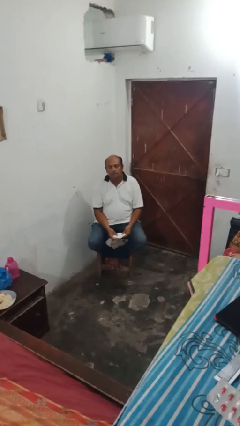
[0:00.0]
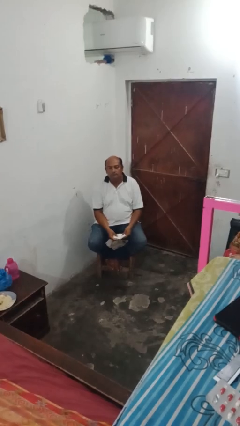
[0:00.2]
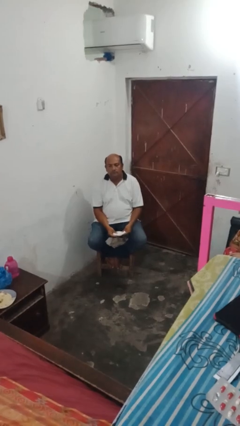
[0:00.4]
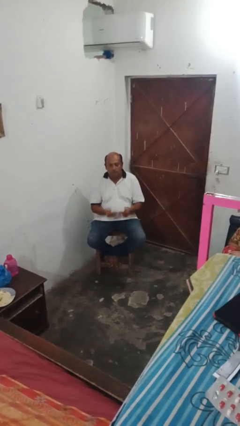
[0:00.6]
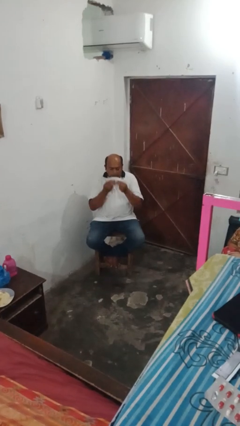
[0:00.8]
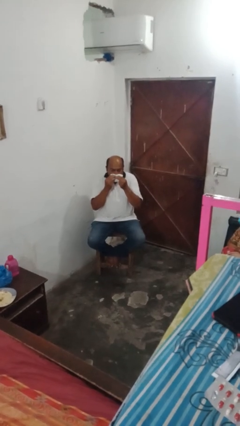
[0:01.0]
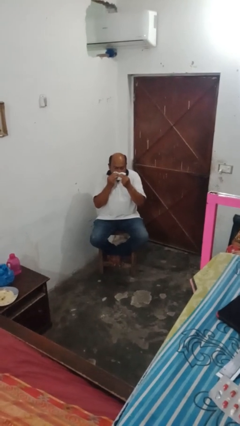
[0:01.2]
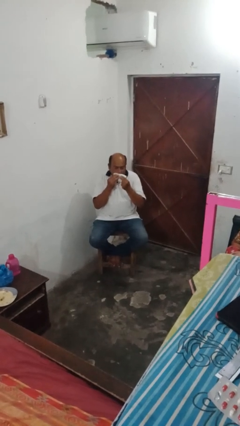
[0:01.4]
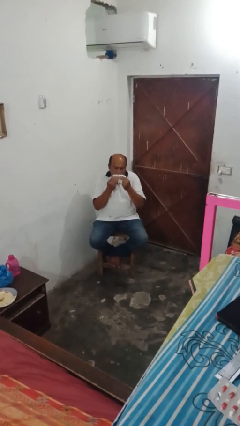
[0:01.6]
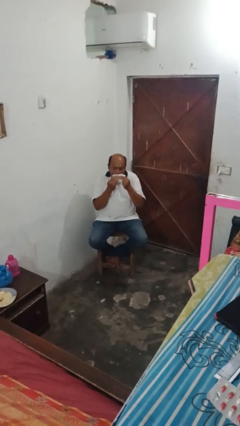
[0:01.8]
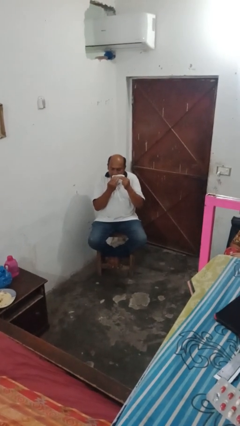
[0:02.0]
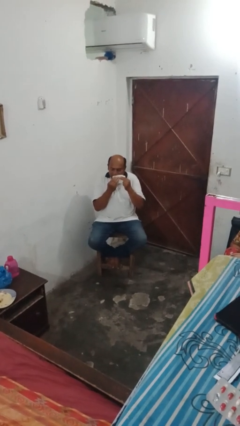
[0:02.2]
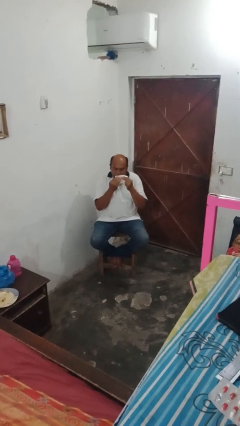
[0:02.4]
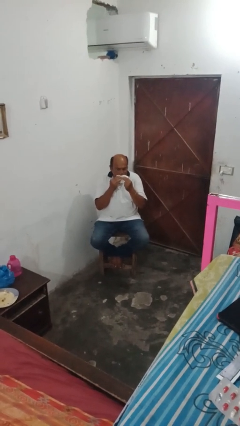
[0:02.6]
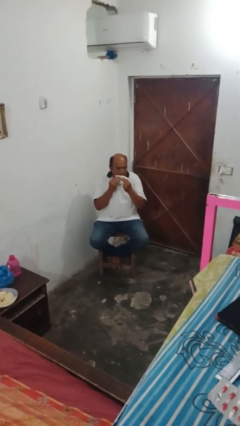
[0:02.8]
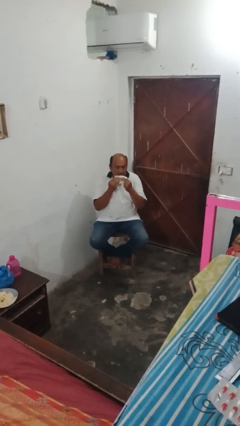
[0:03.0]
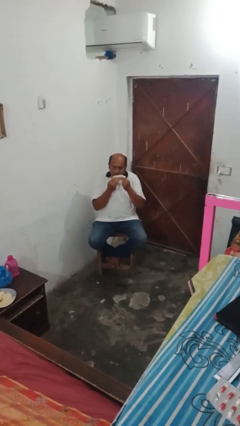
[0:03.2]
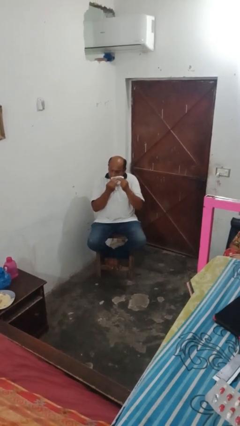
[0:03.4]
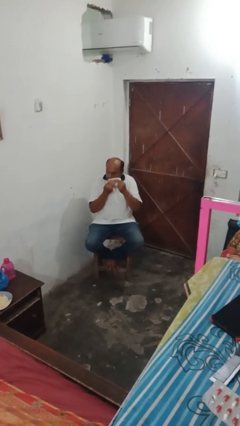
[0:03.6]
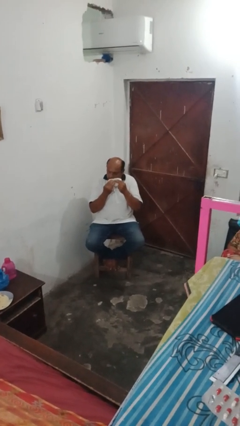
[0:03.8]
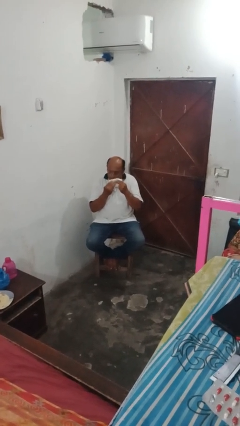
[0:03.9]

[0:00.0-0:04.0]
person wipes mouth with napkin

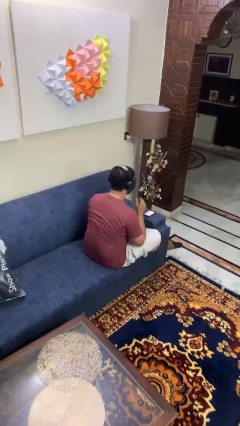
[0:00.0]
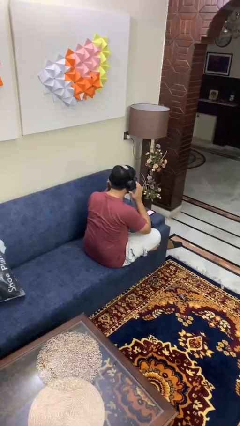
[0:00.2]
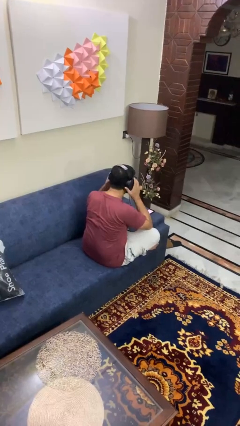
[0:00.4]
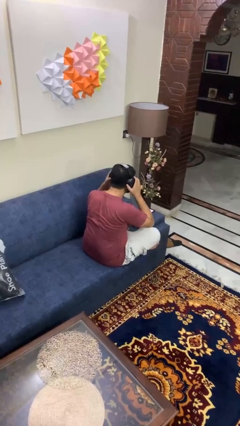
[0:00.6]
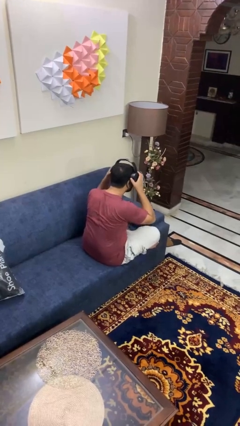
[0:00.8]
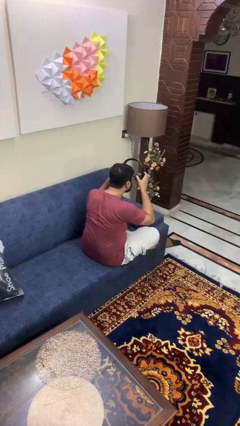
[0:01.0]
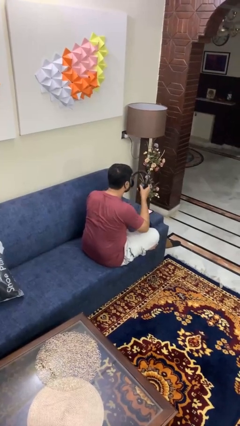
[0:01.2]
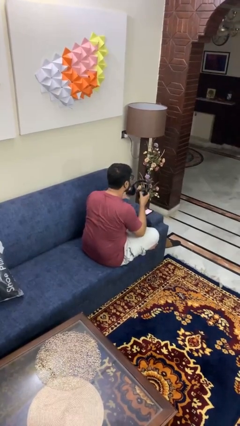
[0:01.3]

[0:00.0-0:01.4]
person takes off headphones

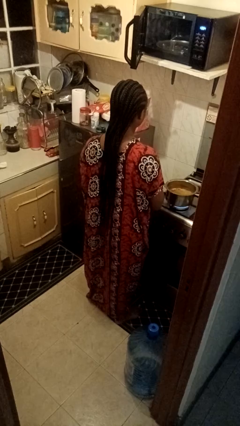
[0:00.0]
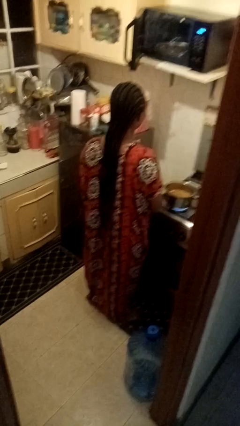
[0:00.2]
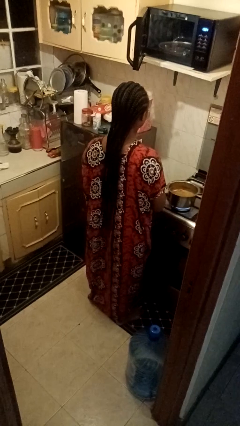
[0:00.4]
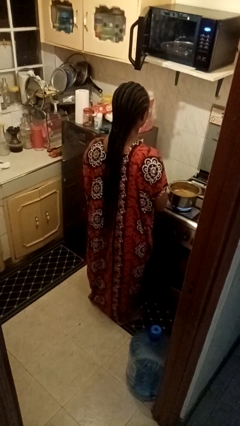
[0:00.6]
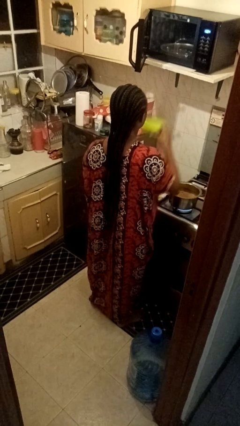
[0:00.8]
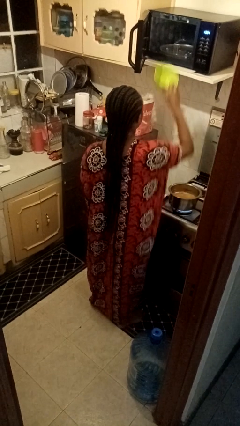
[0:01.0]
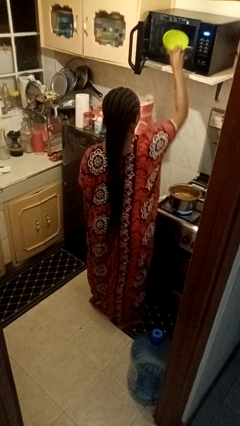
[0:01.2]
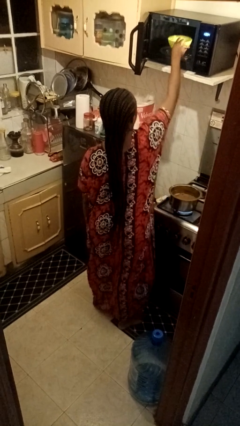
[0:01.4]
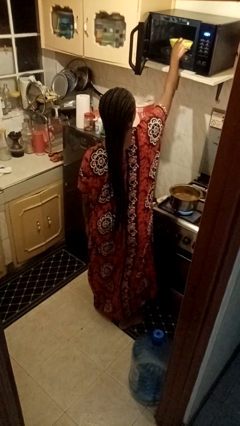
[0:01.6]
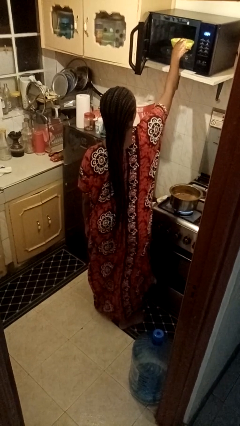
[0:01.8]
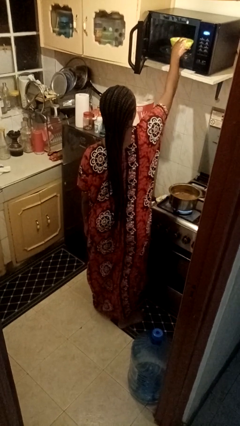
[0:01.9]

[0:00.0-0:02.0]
person puts object into microwave

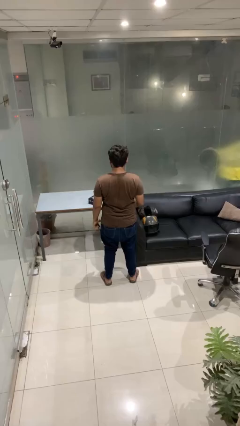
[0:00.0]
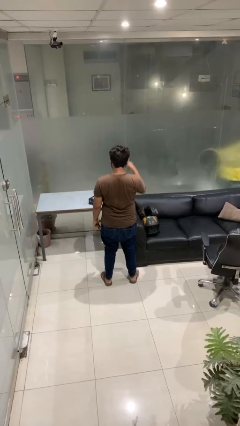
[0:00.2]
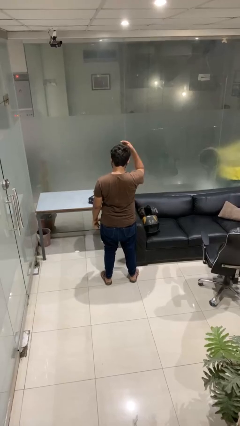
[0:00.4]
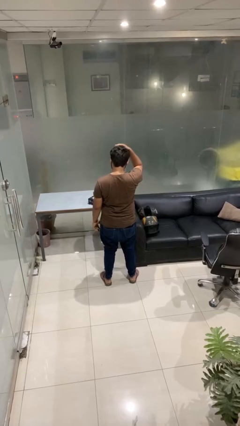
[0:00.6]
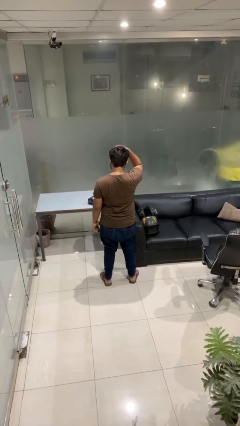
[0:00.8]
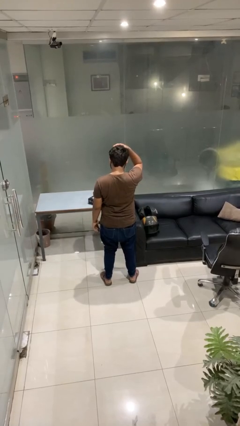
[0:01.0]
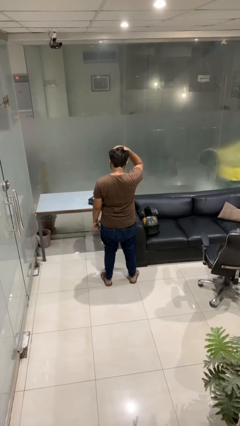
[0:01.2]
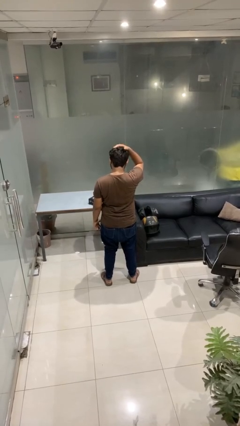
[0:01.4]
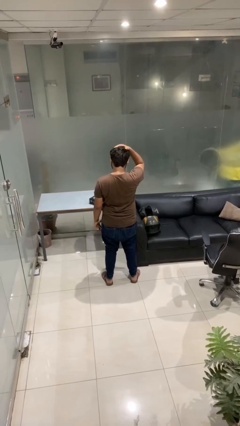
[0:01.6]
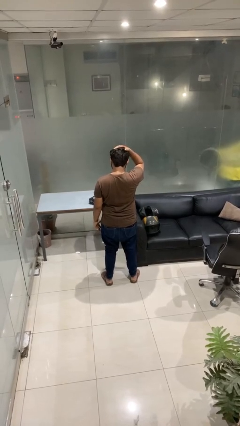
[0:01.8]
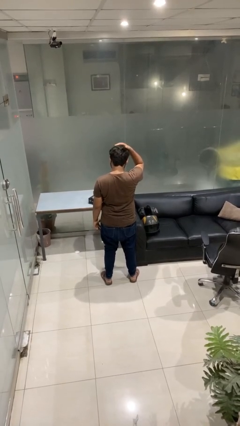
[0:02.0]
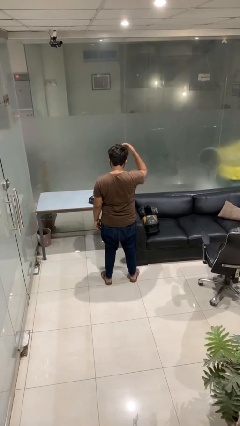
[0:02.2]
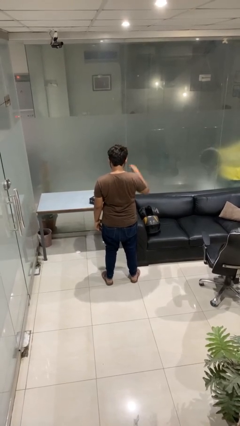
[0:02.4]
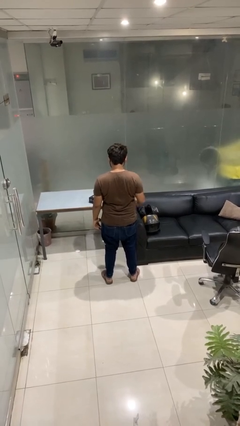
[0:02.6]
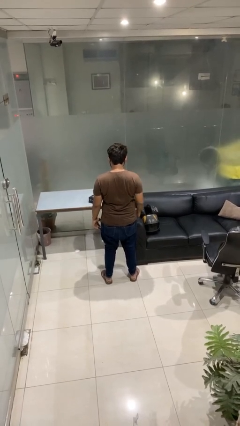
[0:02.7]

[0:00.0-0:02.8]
person pats head

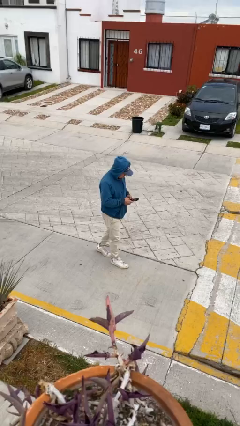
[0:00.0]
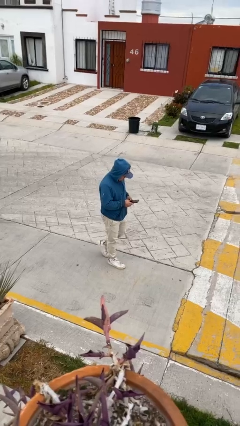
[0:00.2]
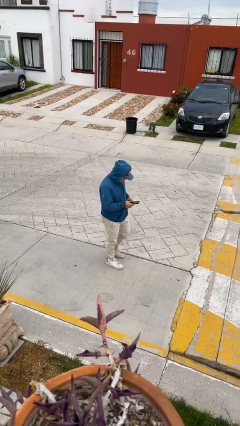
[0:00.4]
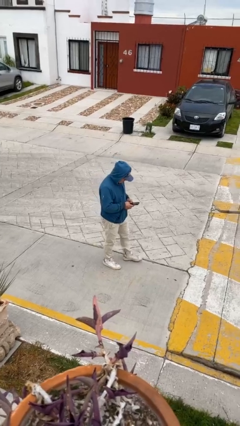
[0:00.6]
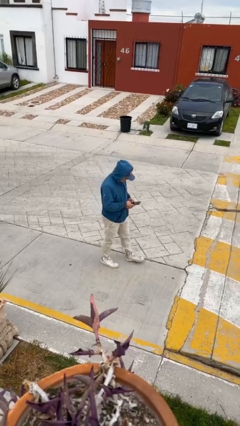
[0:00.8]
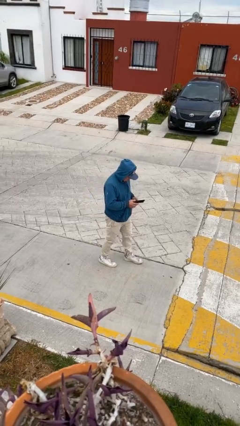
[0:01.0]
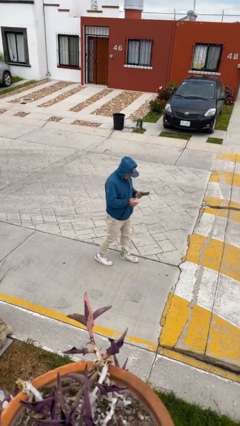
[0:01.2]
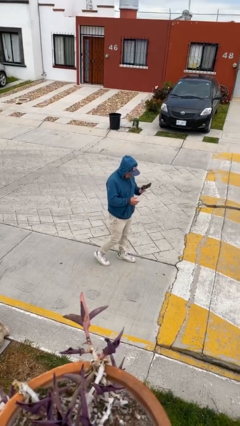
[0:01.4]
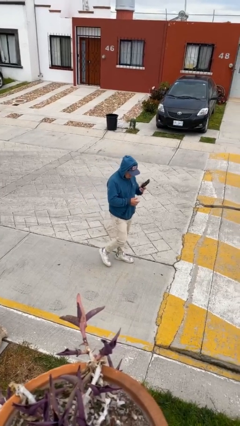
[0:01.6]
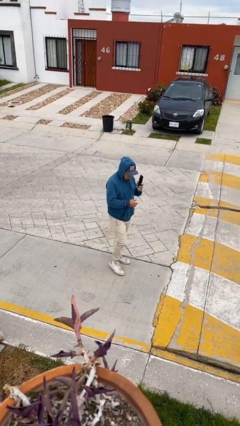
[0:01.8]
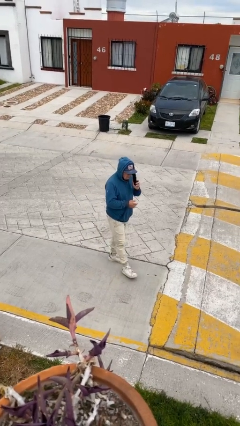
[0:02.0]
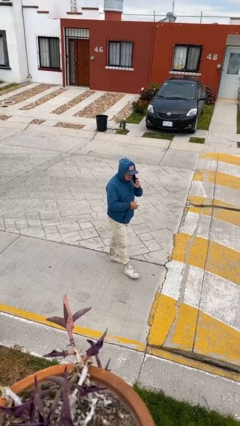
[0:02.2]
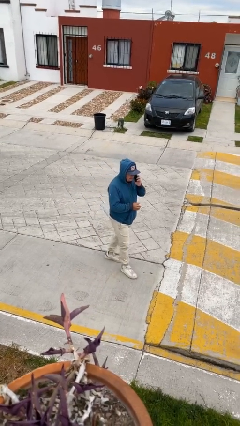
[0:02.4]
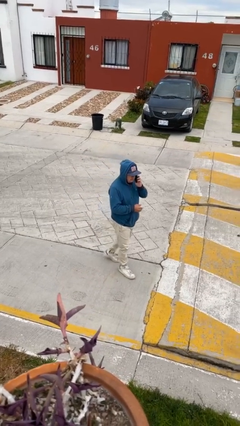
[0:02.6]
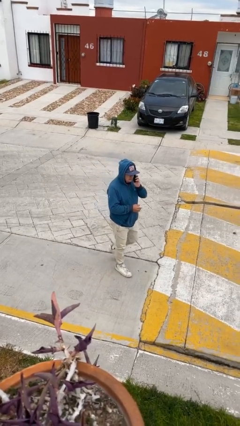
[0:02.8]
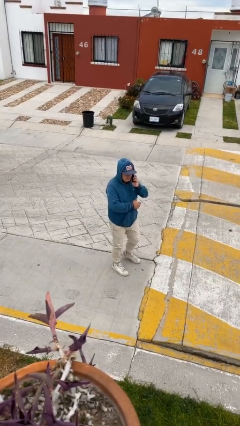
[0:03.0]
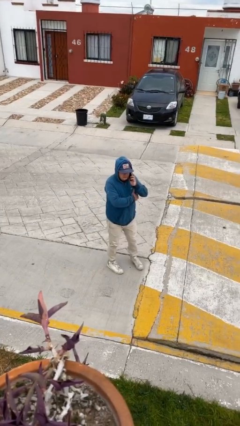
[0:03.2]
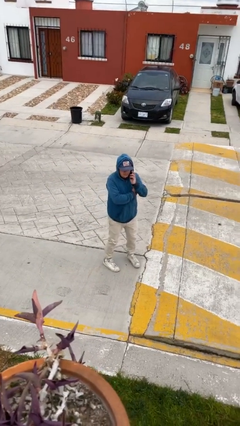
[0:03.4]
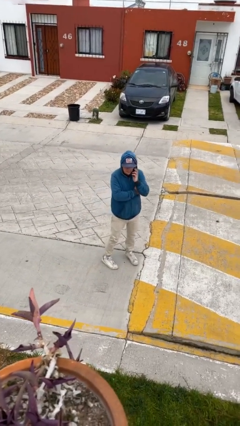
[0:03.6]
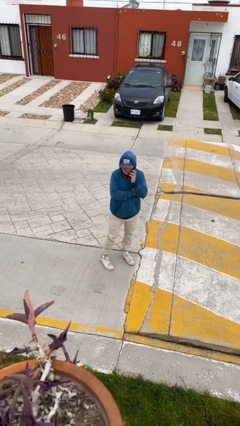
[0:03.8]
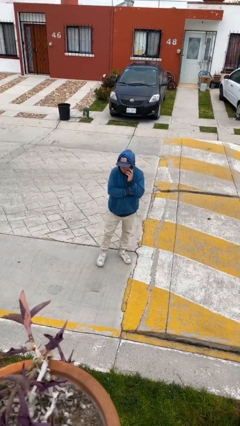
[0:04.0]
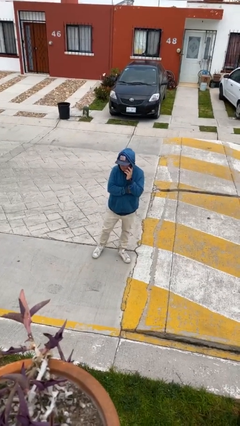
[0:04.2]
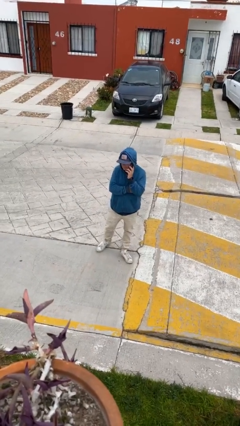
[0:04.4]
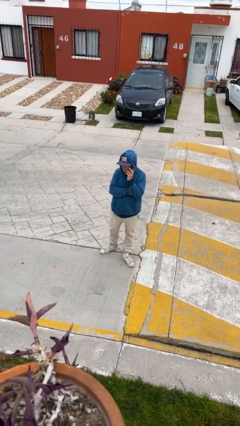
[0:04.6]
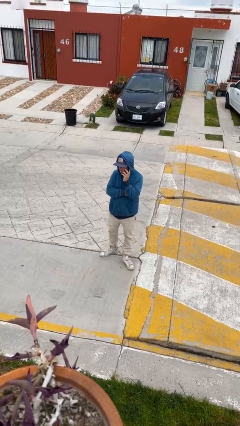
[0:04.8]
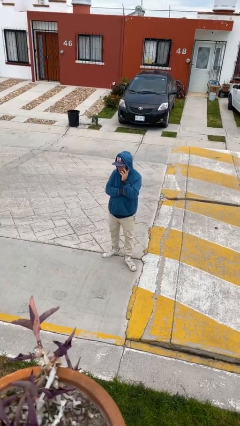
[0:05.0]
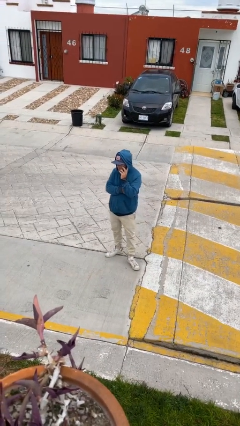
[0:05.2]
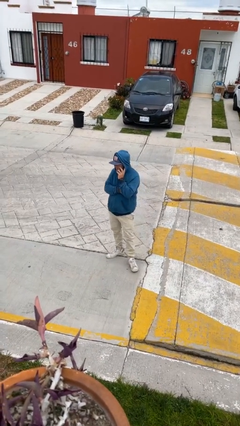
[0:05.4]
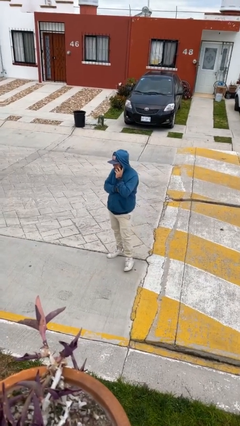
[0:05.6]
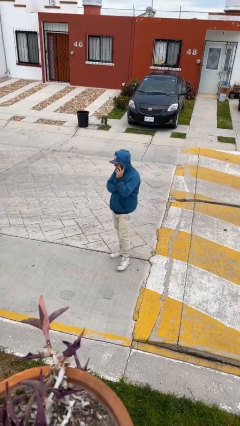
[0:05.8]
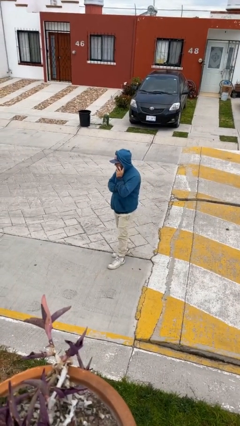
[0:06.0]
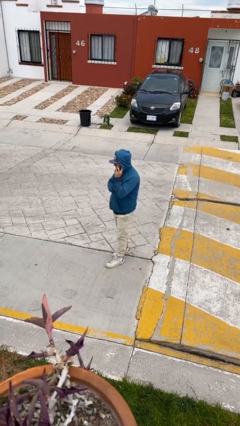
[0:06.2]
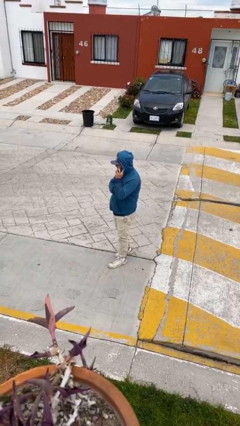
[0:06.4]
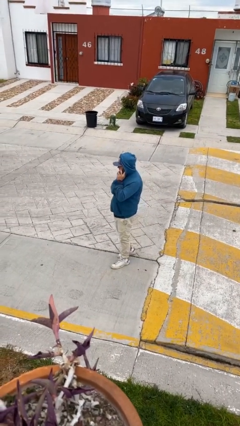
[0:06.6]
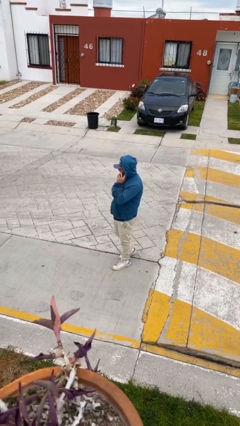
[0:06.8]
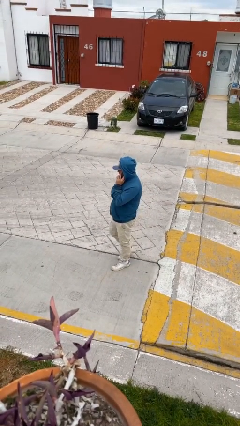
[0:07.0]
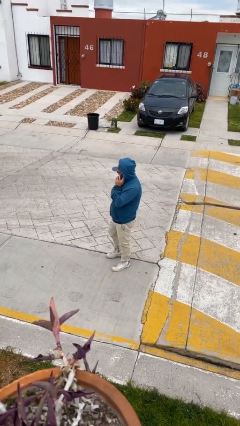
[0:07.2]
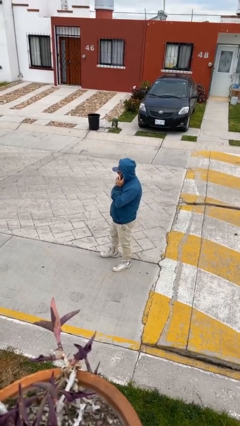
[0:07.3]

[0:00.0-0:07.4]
person talks on phone

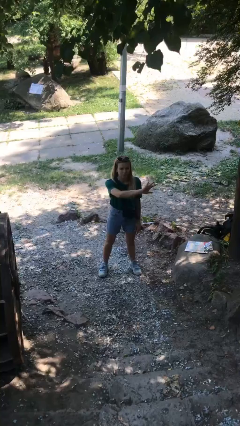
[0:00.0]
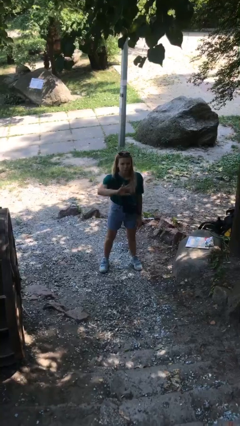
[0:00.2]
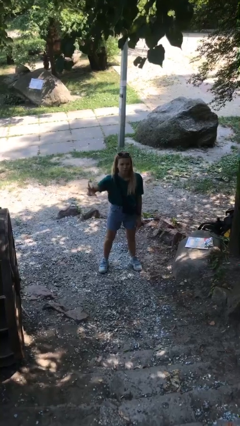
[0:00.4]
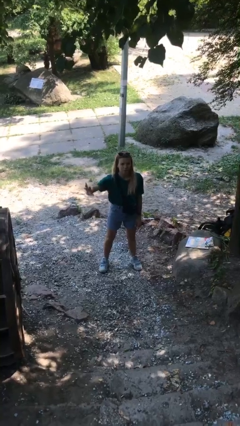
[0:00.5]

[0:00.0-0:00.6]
person gestures swipe right
